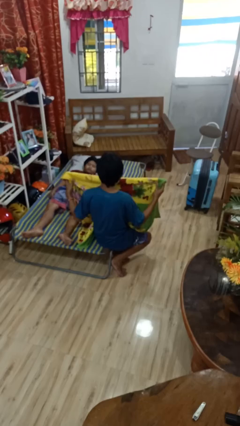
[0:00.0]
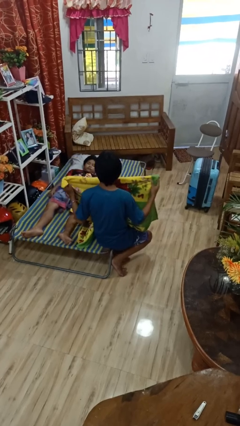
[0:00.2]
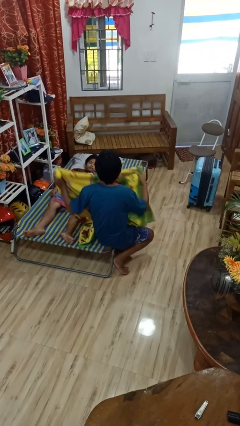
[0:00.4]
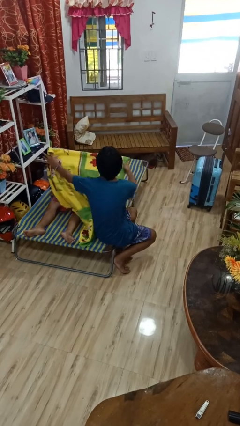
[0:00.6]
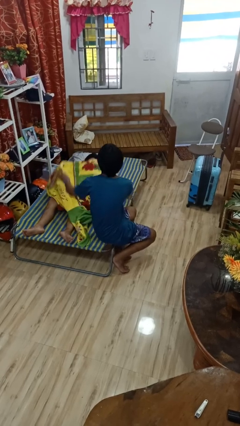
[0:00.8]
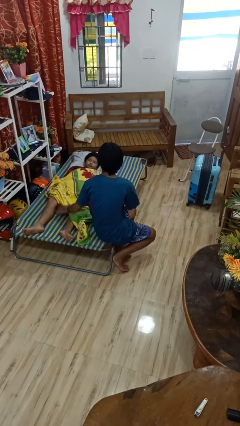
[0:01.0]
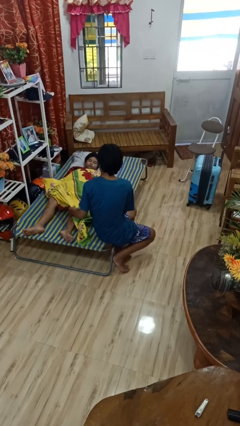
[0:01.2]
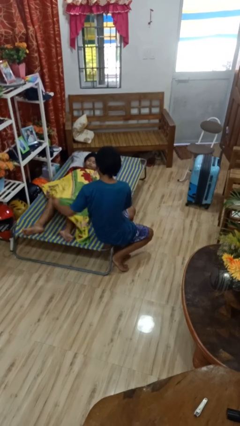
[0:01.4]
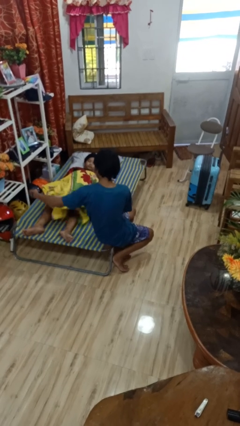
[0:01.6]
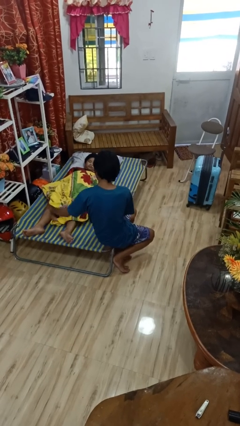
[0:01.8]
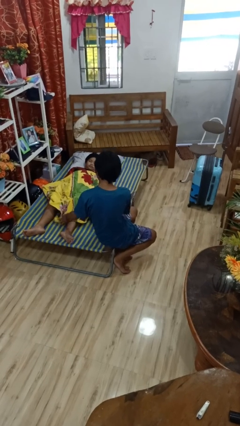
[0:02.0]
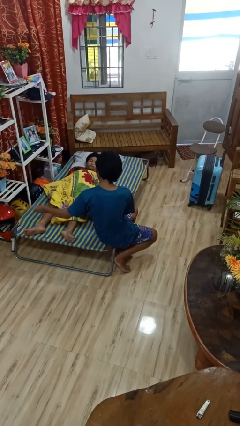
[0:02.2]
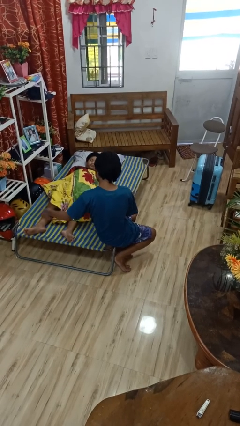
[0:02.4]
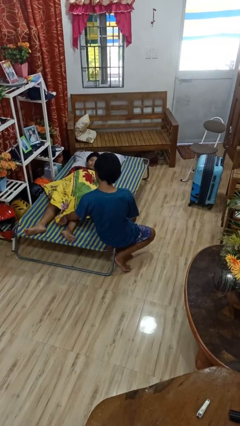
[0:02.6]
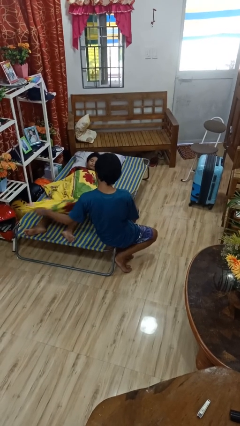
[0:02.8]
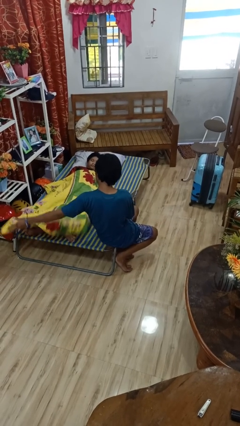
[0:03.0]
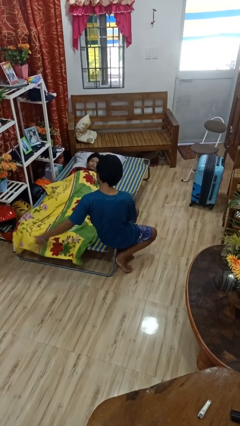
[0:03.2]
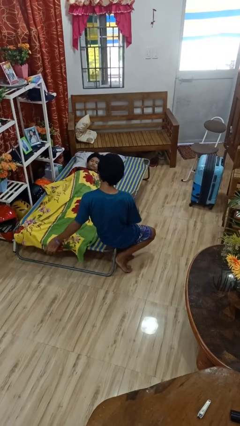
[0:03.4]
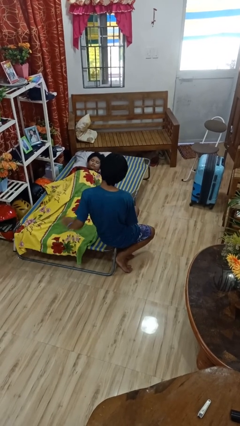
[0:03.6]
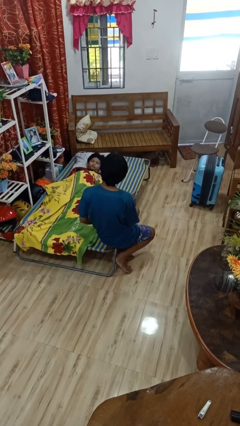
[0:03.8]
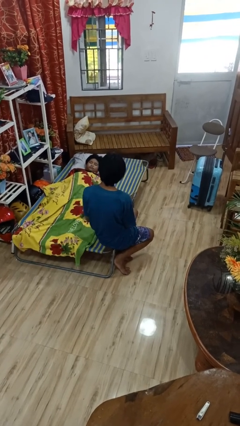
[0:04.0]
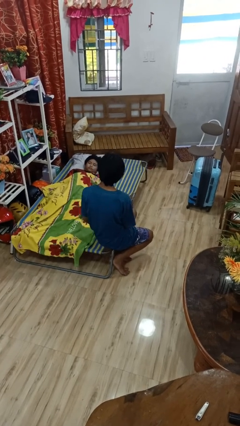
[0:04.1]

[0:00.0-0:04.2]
person covers friend with blanket

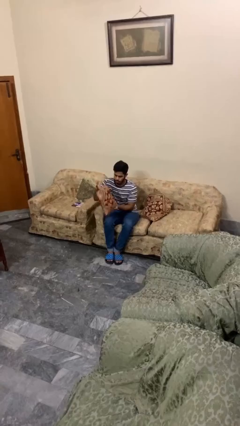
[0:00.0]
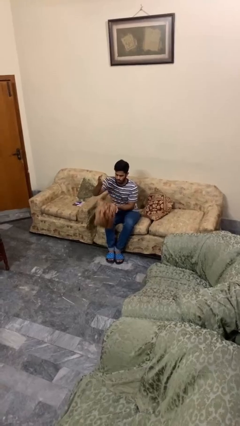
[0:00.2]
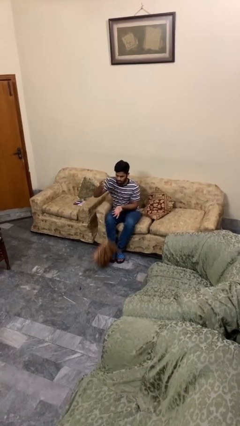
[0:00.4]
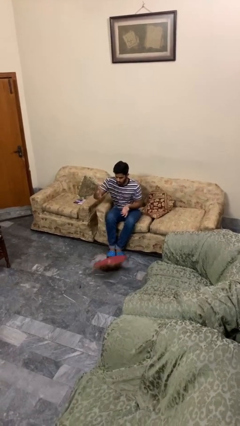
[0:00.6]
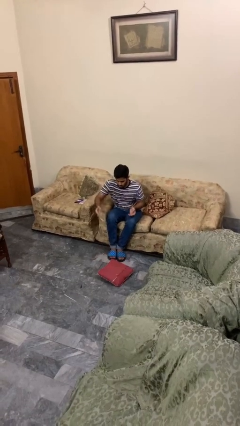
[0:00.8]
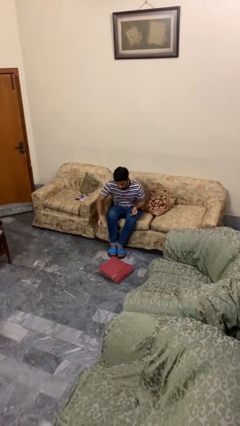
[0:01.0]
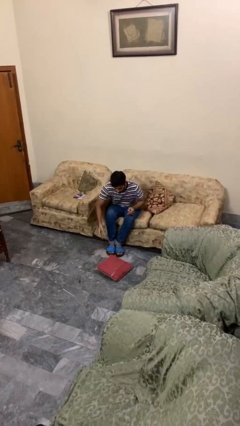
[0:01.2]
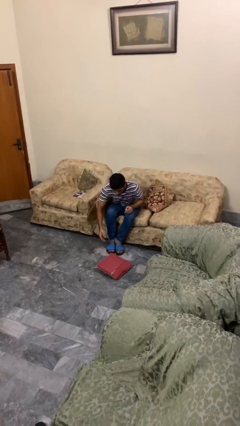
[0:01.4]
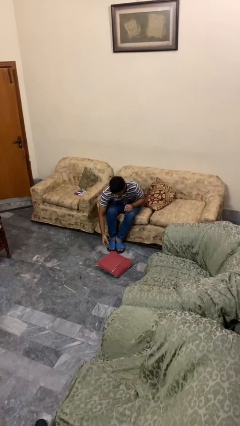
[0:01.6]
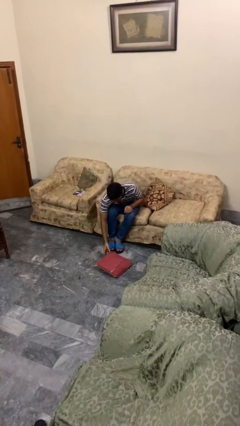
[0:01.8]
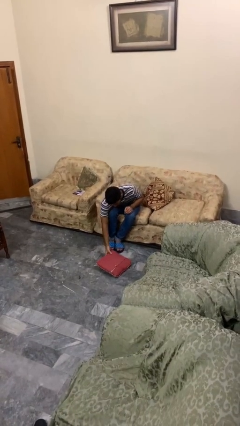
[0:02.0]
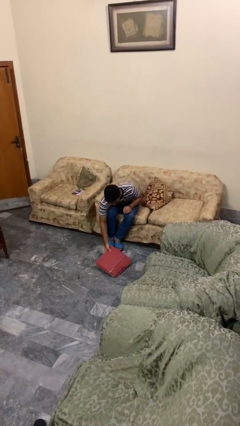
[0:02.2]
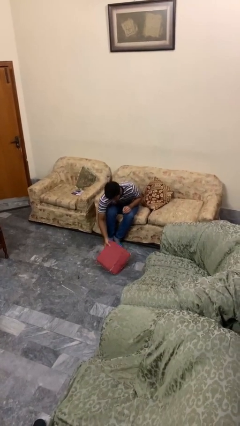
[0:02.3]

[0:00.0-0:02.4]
person drops object

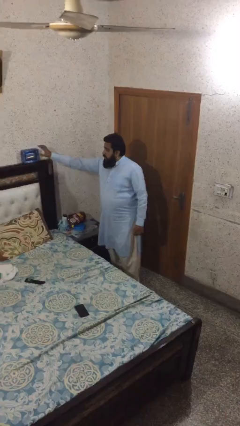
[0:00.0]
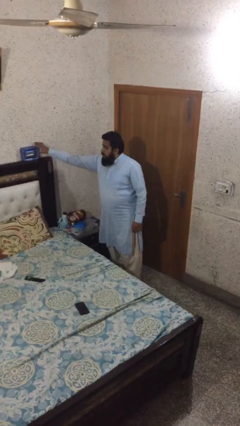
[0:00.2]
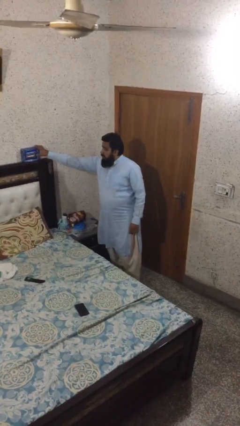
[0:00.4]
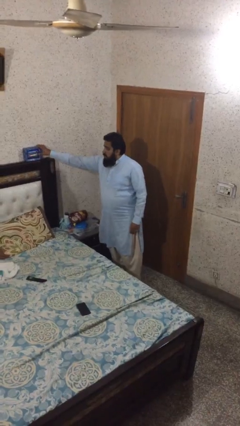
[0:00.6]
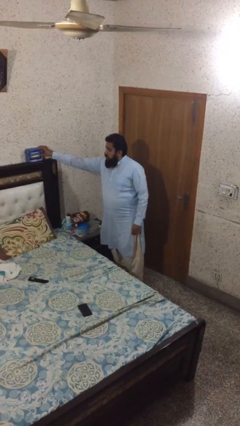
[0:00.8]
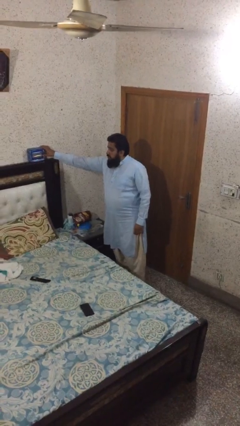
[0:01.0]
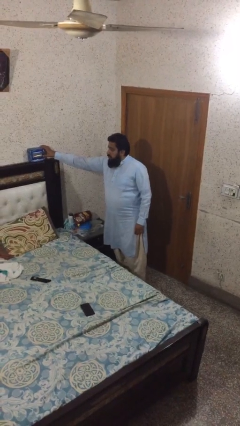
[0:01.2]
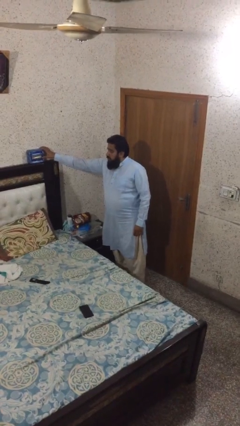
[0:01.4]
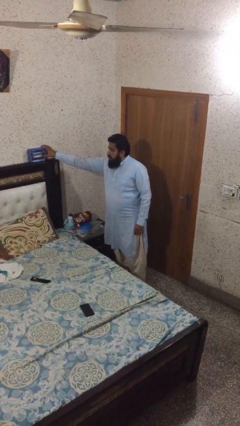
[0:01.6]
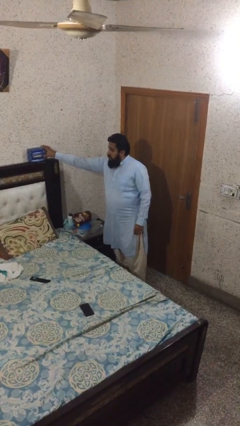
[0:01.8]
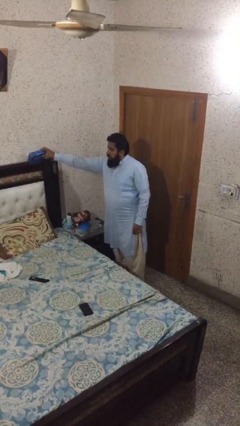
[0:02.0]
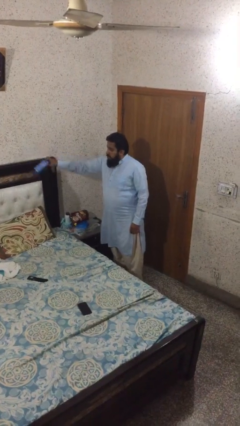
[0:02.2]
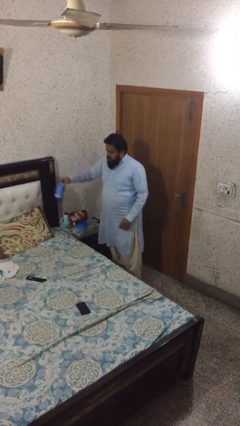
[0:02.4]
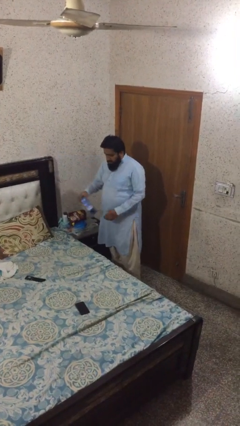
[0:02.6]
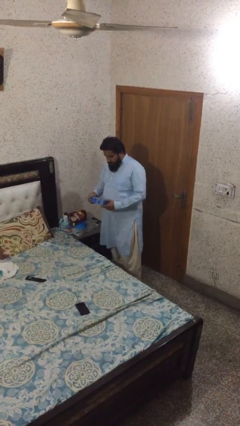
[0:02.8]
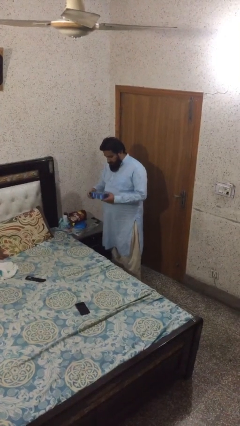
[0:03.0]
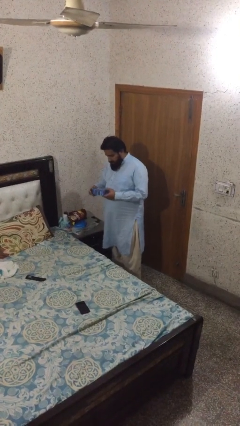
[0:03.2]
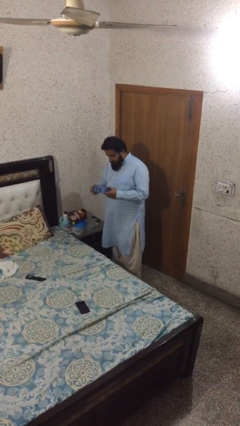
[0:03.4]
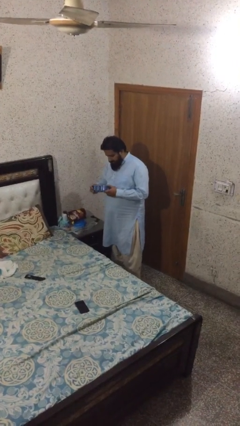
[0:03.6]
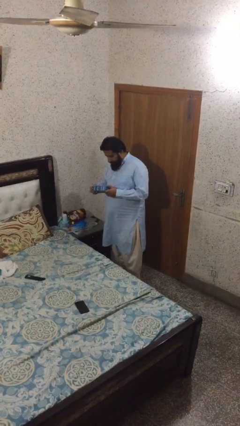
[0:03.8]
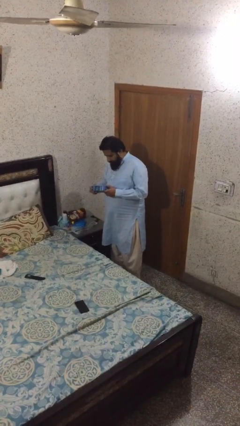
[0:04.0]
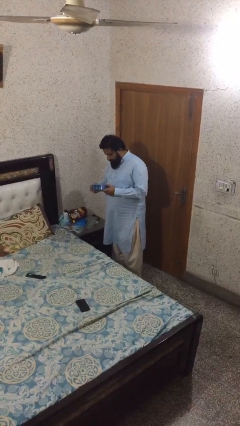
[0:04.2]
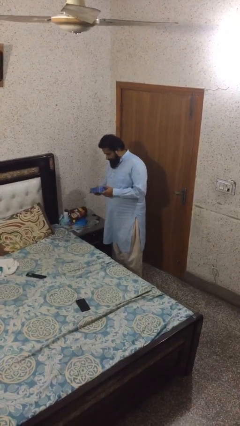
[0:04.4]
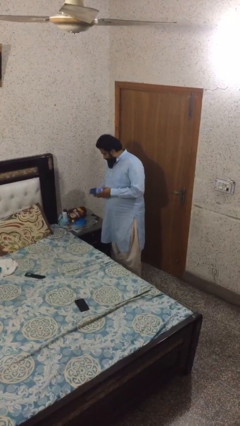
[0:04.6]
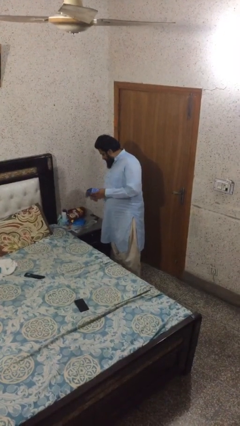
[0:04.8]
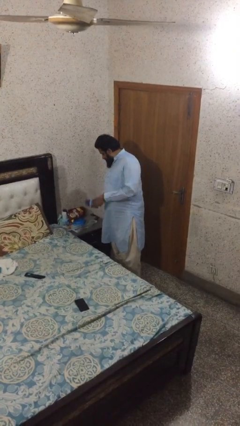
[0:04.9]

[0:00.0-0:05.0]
person picks up object from shelf

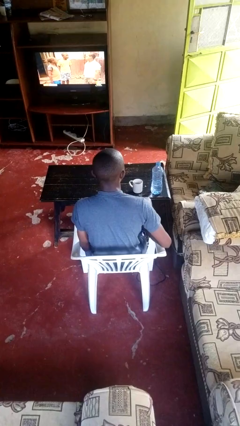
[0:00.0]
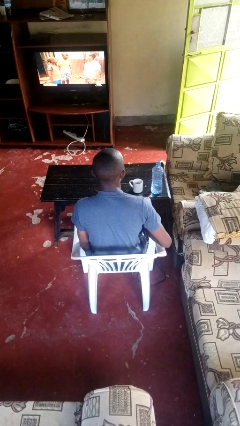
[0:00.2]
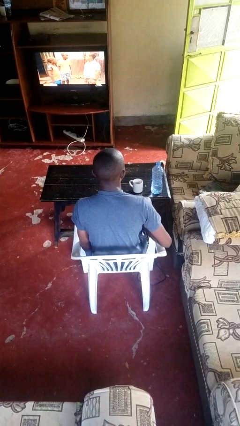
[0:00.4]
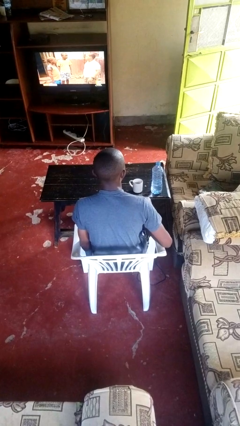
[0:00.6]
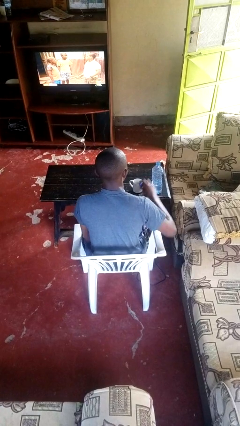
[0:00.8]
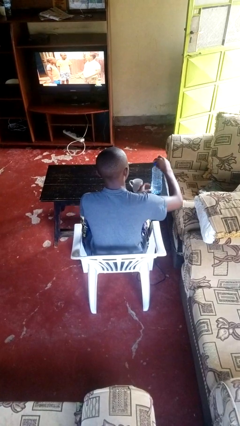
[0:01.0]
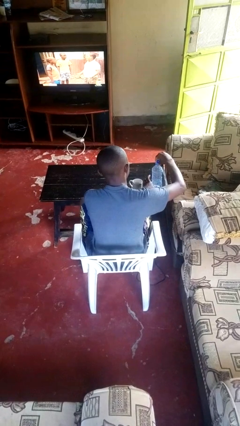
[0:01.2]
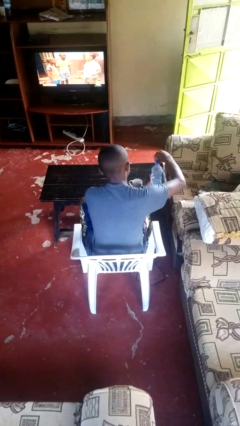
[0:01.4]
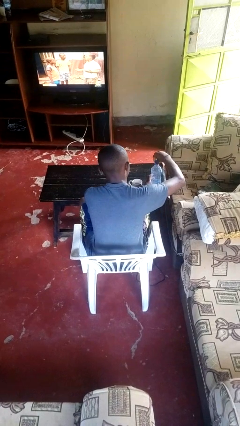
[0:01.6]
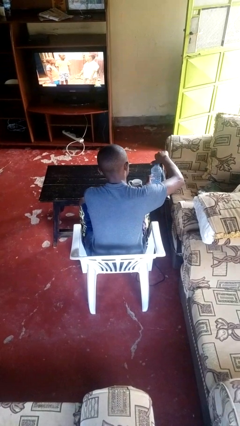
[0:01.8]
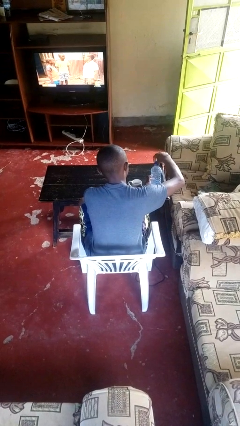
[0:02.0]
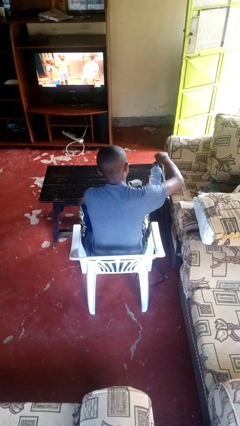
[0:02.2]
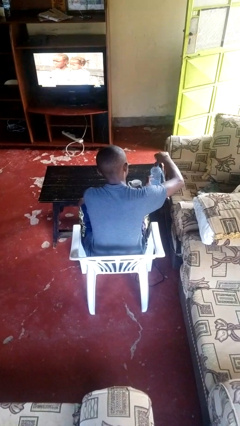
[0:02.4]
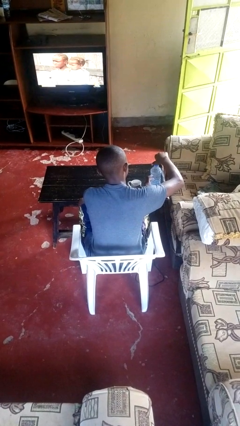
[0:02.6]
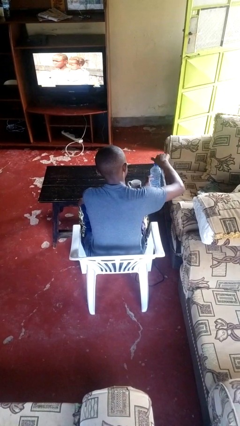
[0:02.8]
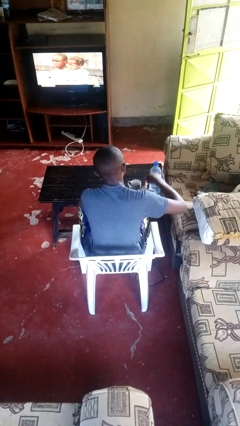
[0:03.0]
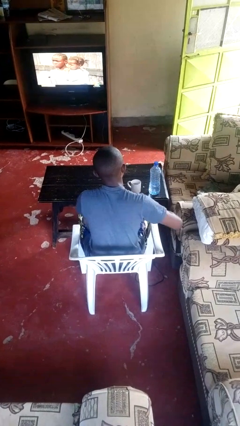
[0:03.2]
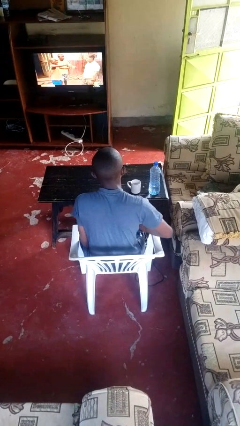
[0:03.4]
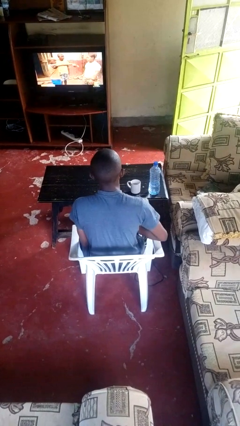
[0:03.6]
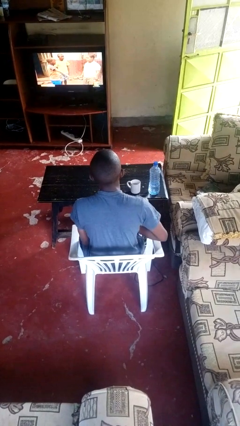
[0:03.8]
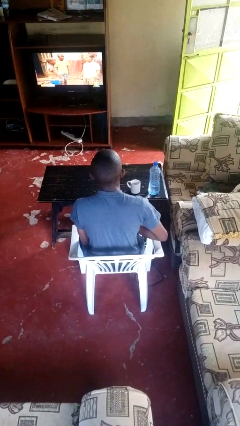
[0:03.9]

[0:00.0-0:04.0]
person screws lid to bottle

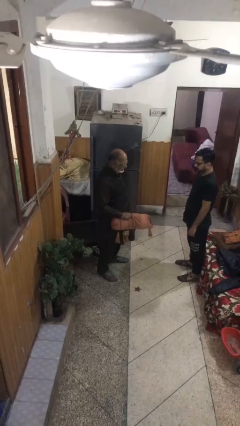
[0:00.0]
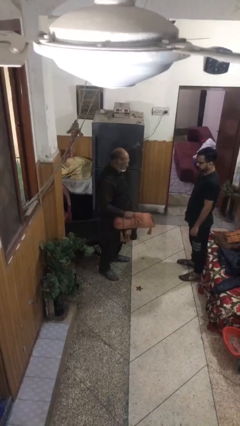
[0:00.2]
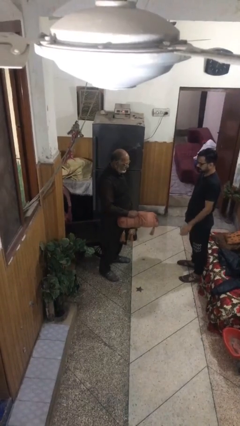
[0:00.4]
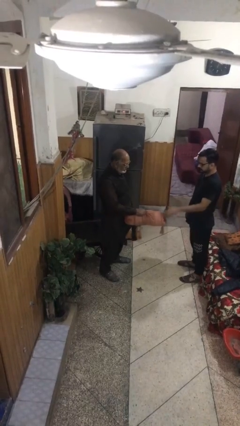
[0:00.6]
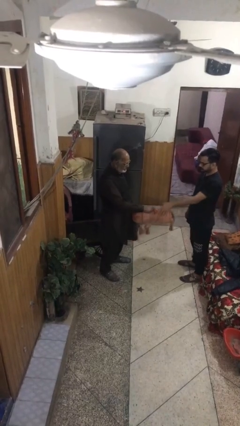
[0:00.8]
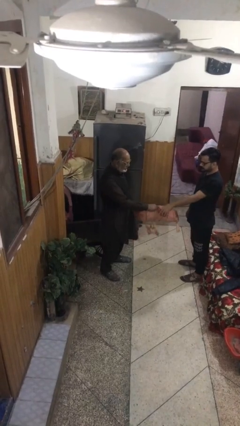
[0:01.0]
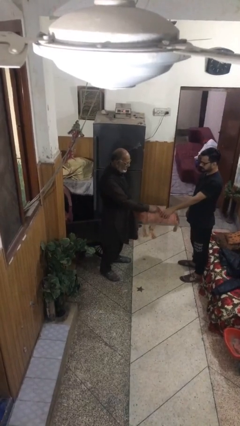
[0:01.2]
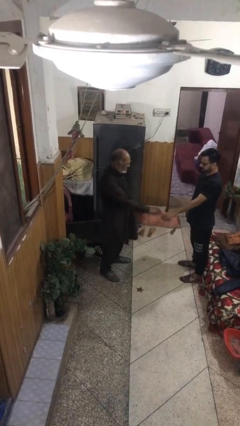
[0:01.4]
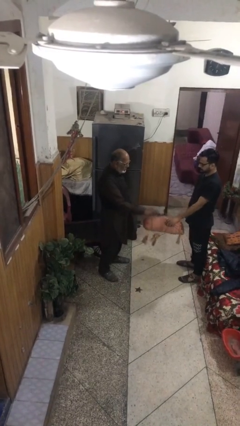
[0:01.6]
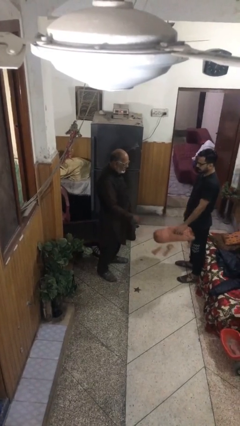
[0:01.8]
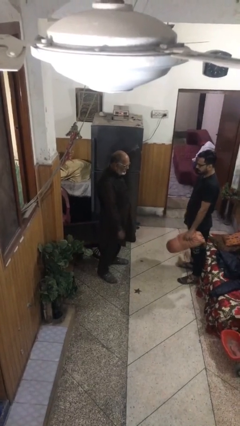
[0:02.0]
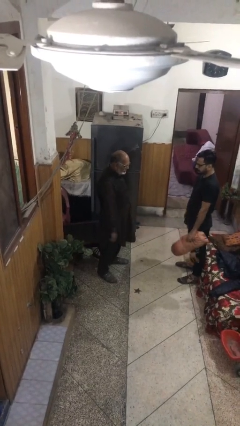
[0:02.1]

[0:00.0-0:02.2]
person transfers object to person

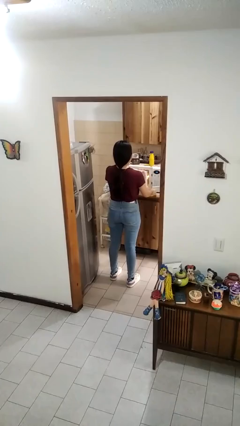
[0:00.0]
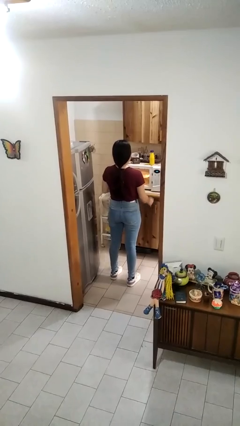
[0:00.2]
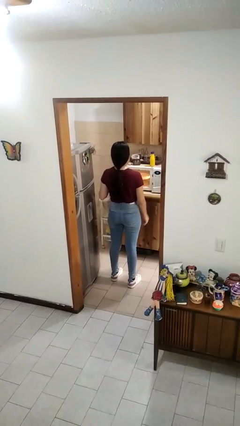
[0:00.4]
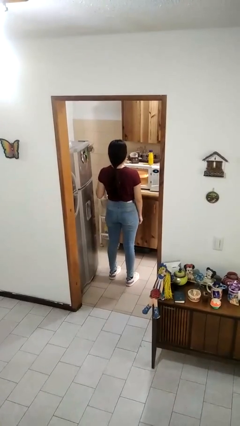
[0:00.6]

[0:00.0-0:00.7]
person opens microwave
